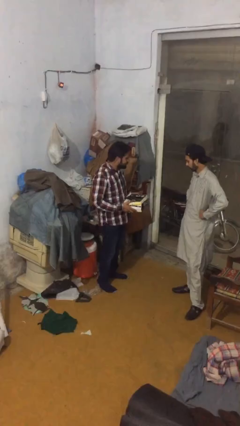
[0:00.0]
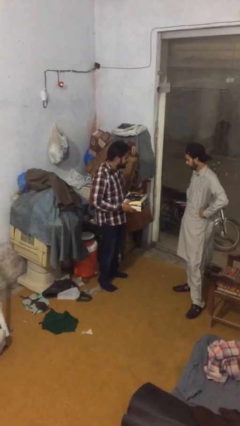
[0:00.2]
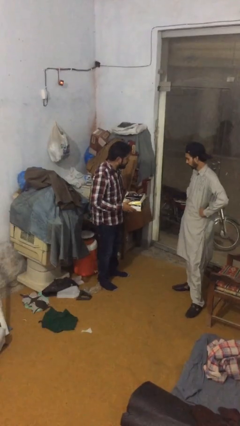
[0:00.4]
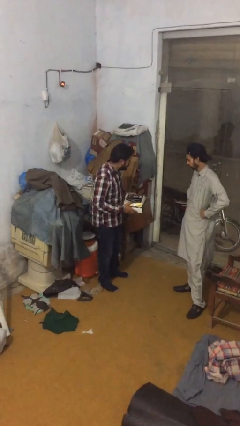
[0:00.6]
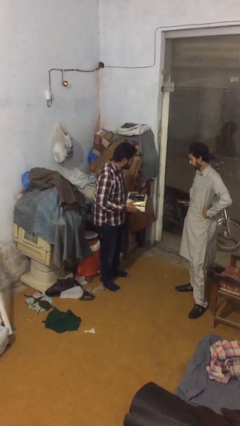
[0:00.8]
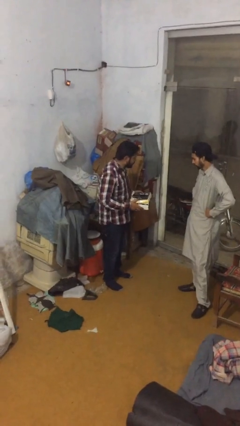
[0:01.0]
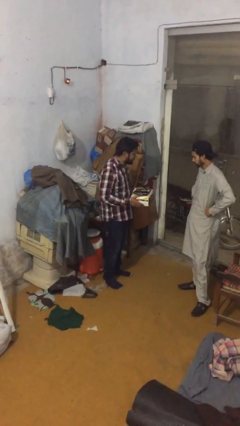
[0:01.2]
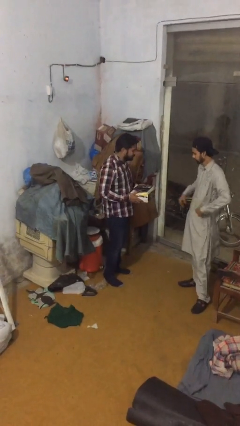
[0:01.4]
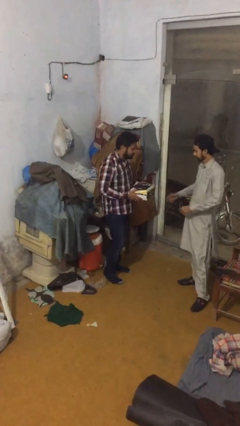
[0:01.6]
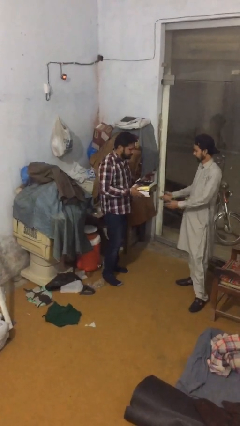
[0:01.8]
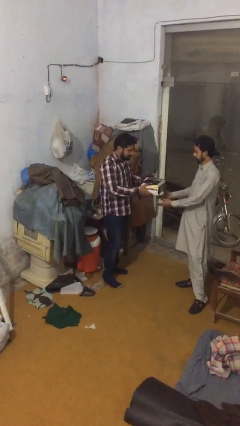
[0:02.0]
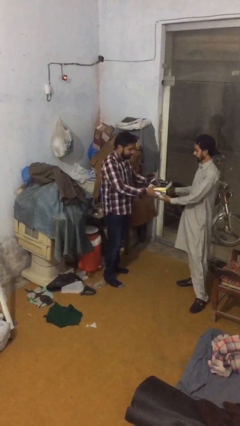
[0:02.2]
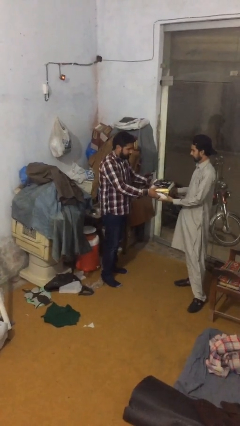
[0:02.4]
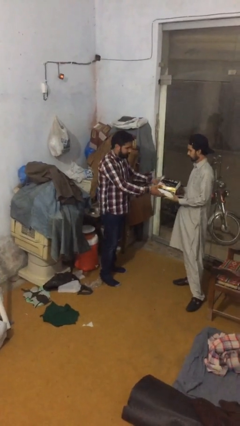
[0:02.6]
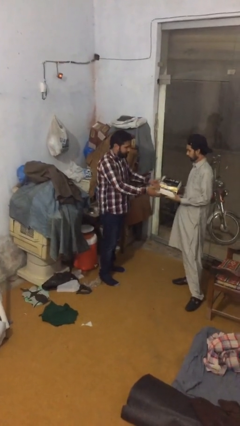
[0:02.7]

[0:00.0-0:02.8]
person transfers object to person

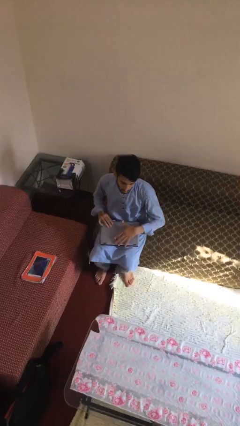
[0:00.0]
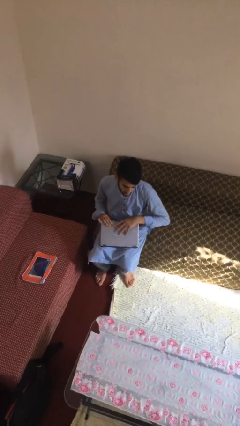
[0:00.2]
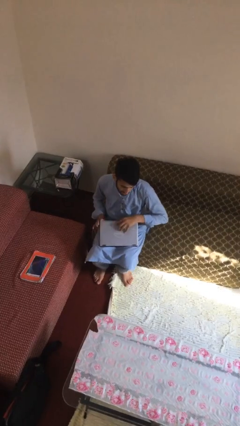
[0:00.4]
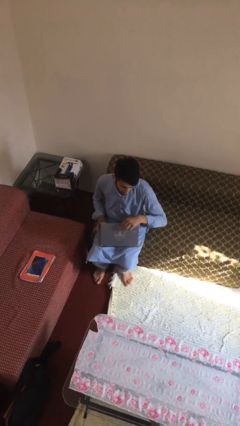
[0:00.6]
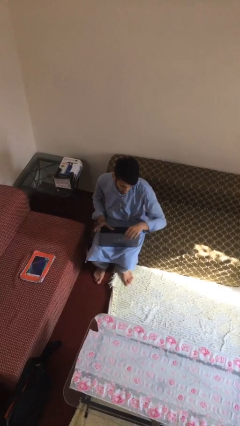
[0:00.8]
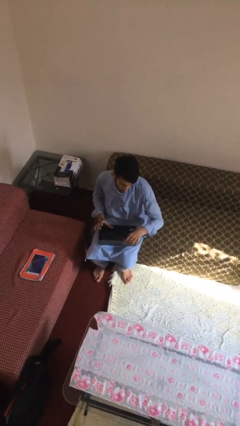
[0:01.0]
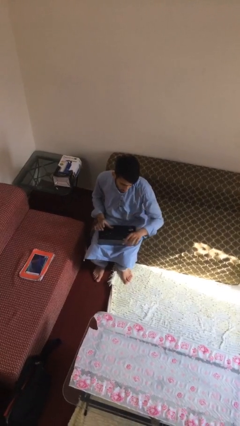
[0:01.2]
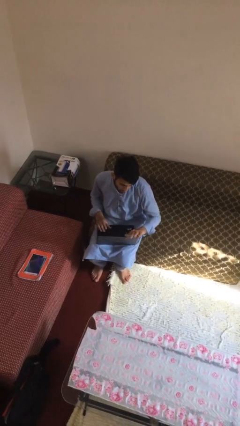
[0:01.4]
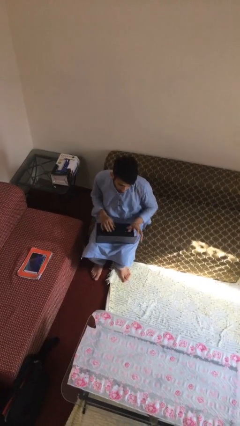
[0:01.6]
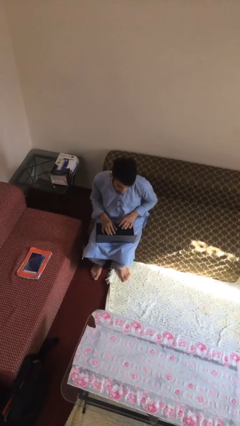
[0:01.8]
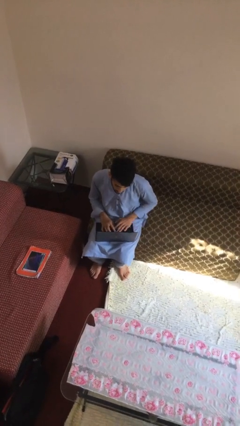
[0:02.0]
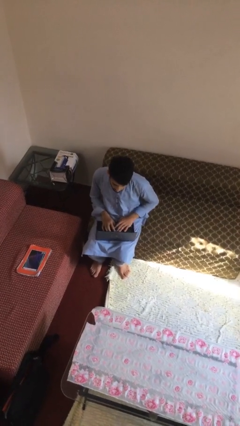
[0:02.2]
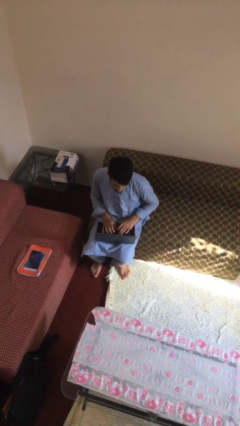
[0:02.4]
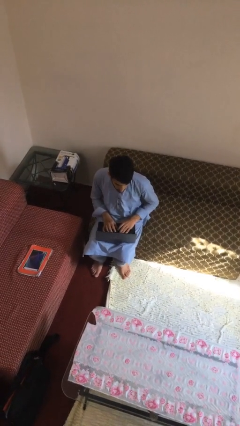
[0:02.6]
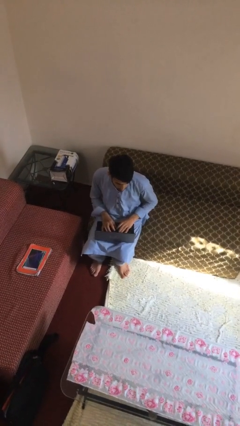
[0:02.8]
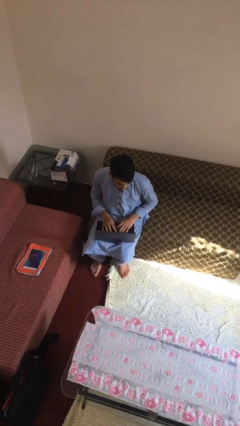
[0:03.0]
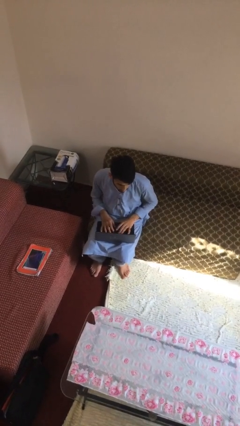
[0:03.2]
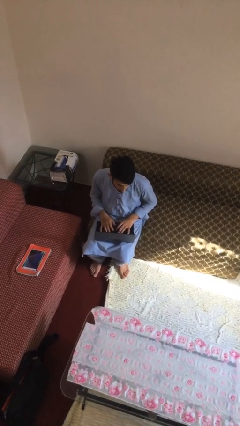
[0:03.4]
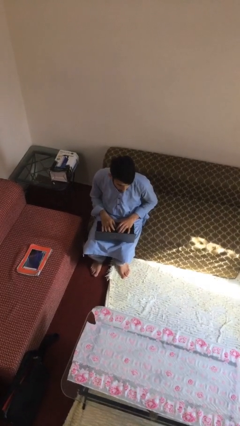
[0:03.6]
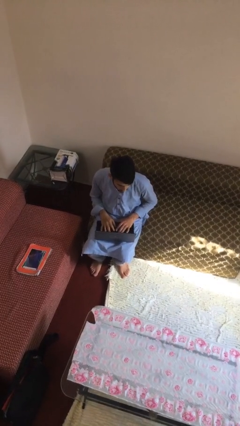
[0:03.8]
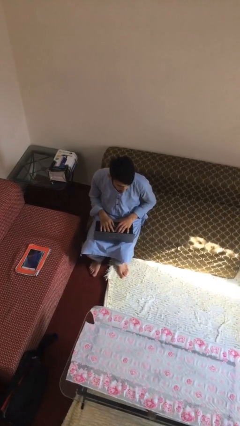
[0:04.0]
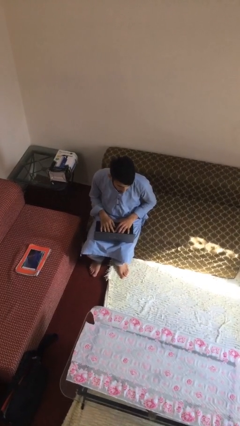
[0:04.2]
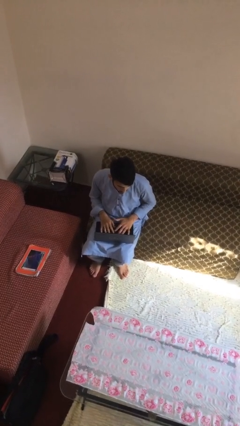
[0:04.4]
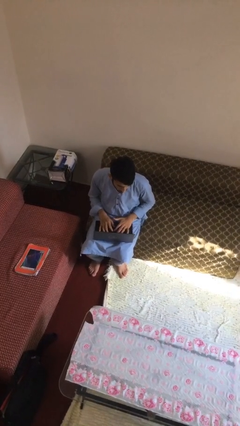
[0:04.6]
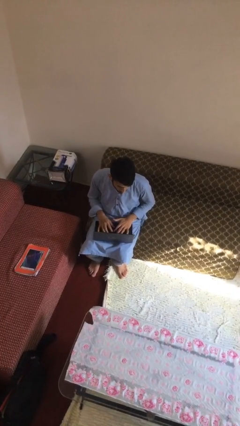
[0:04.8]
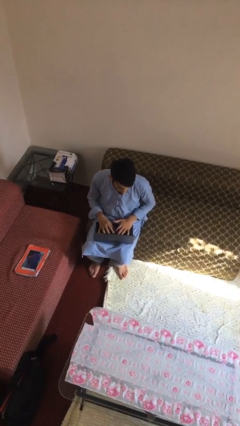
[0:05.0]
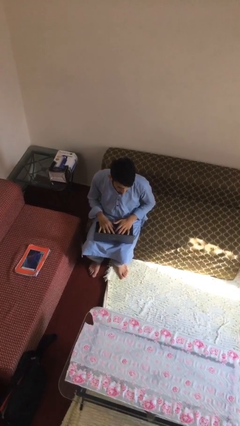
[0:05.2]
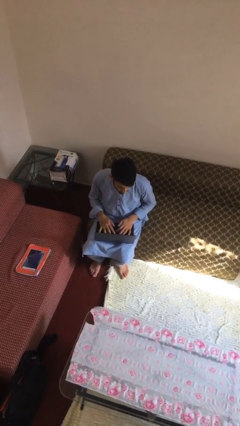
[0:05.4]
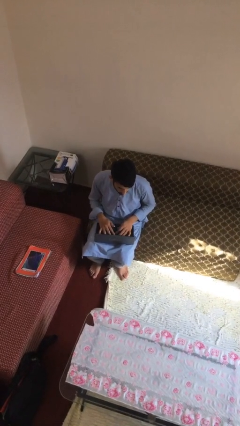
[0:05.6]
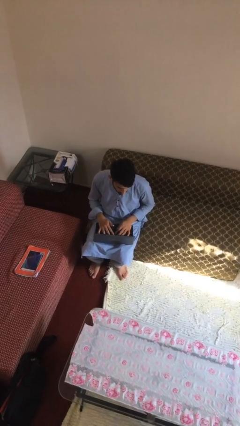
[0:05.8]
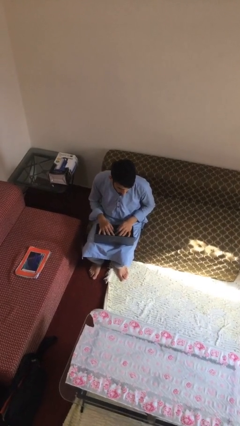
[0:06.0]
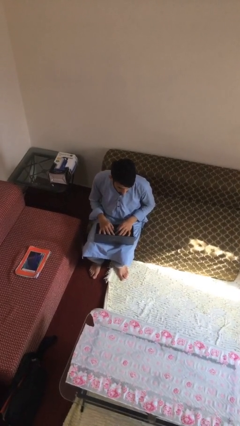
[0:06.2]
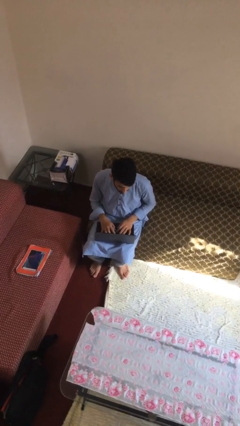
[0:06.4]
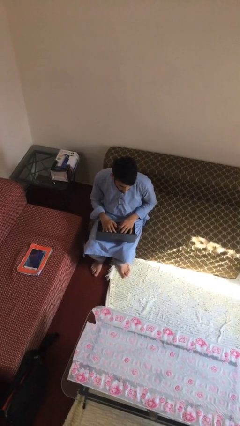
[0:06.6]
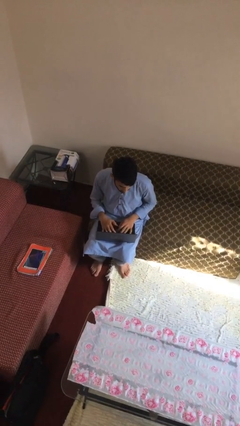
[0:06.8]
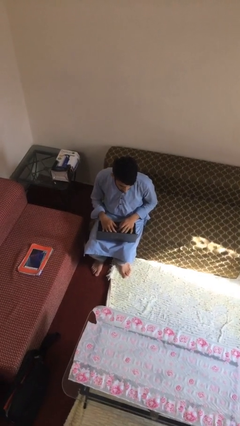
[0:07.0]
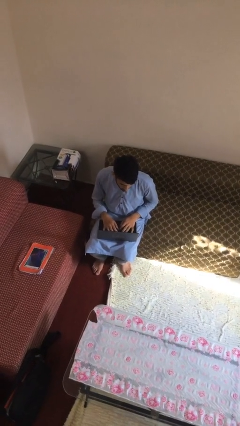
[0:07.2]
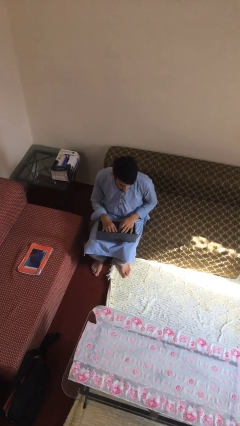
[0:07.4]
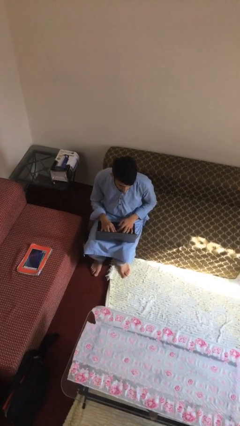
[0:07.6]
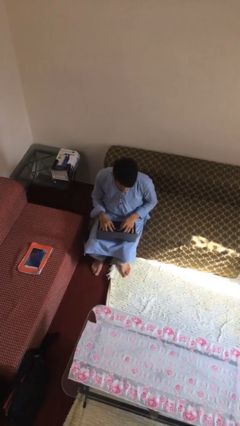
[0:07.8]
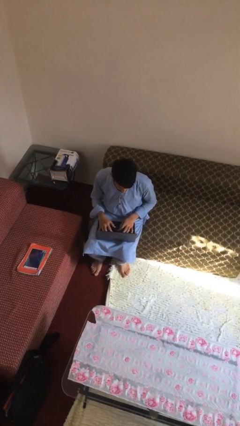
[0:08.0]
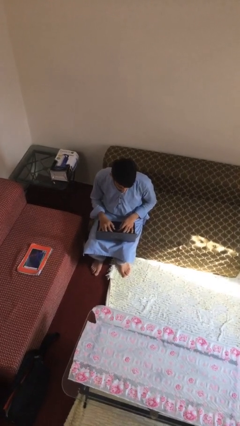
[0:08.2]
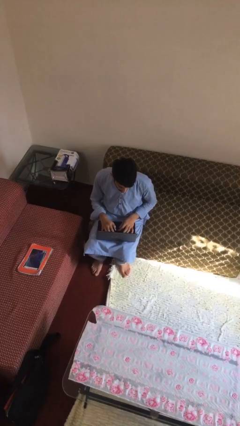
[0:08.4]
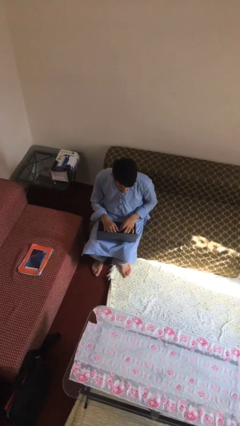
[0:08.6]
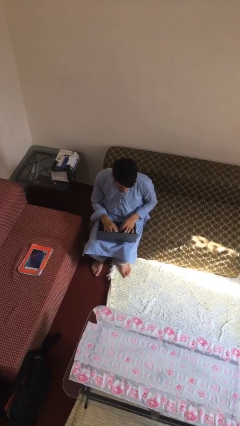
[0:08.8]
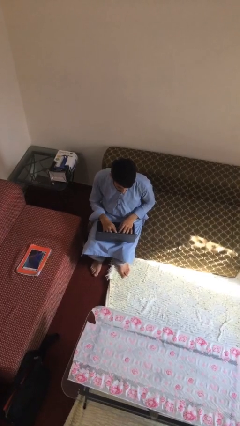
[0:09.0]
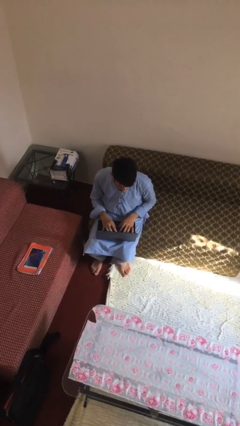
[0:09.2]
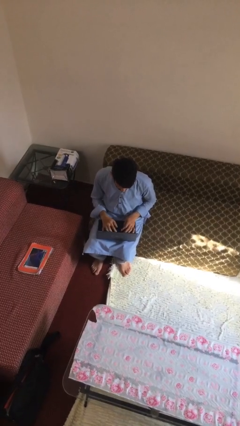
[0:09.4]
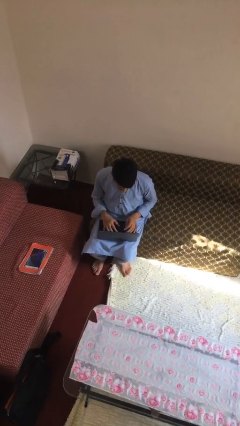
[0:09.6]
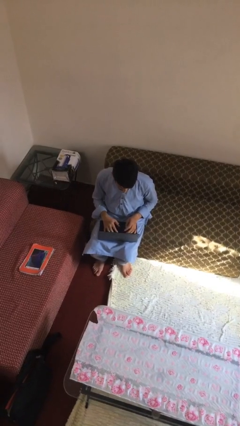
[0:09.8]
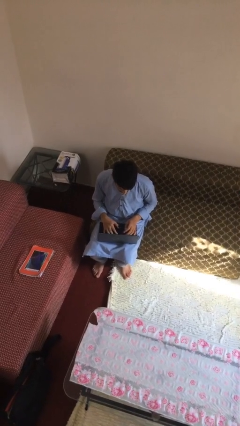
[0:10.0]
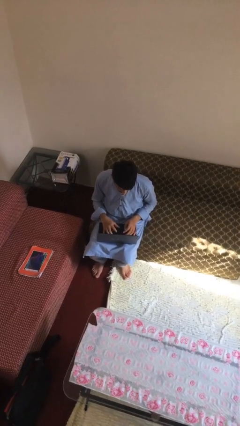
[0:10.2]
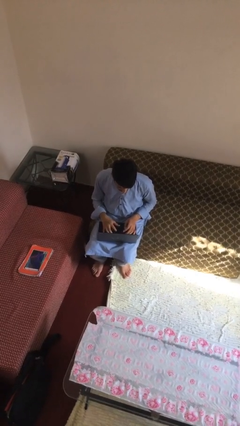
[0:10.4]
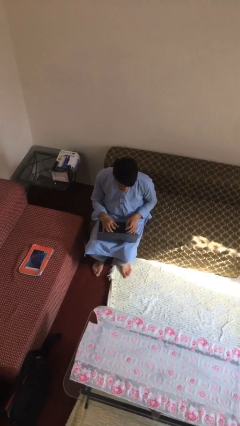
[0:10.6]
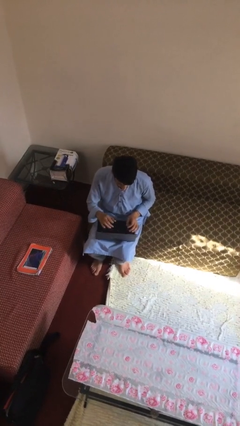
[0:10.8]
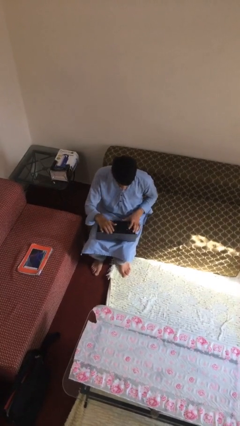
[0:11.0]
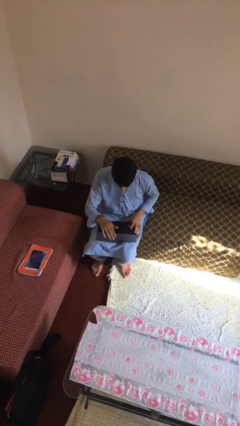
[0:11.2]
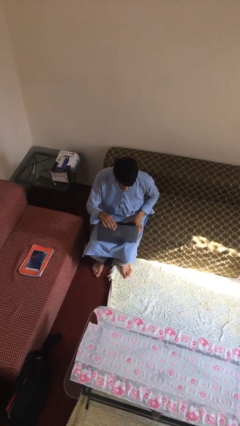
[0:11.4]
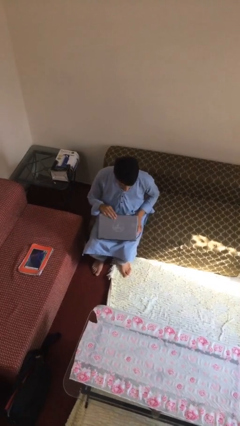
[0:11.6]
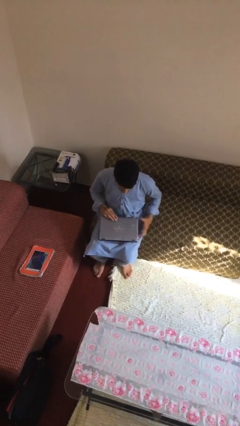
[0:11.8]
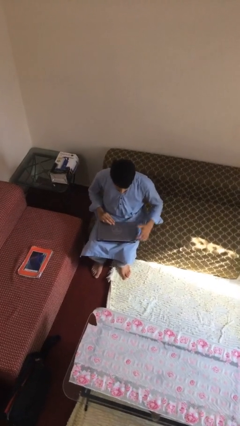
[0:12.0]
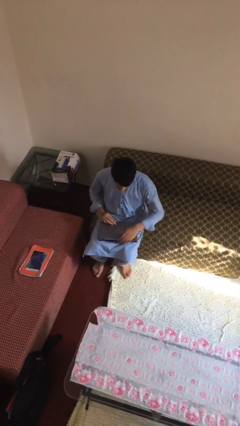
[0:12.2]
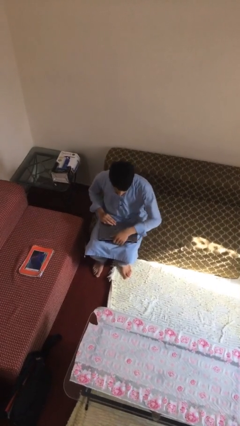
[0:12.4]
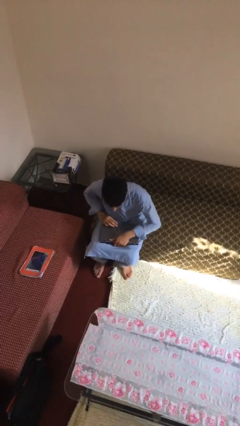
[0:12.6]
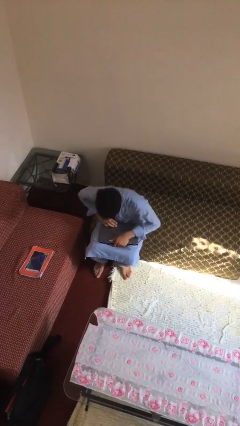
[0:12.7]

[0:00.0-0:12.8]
person interacts with laptop

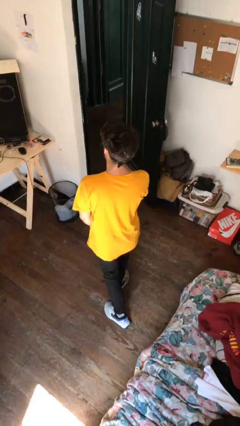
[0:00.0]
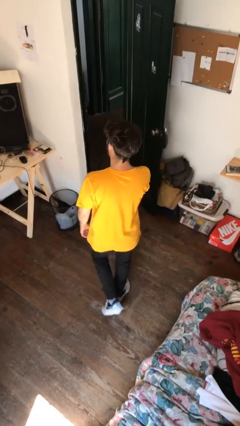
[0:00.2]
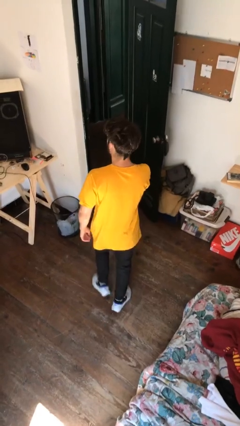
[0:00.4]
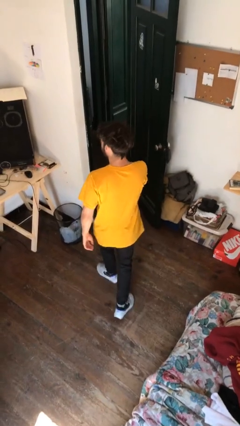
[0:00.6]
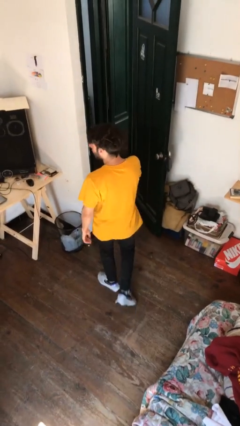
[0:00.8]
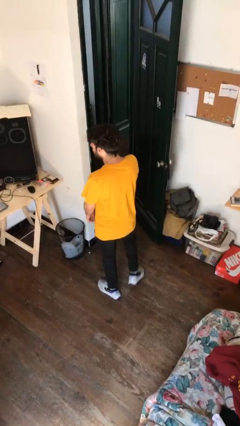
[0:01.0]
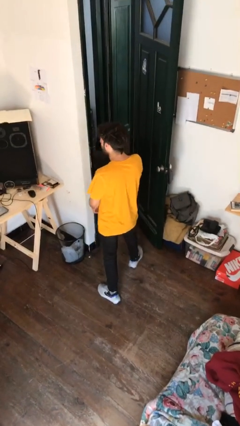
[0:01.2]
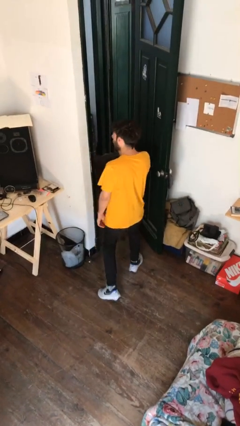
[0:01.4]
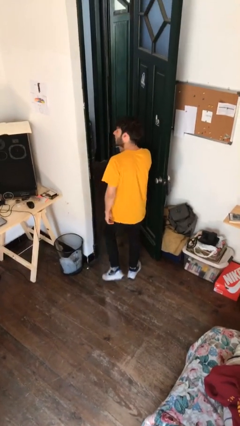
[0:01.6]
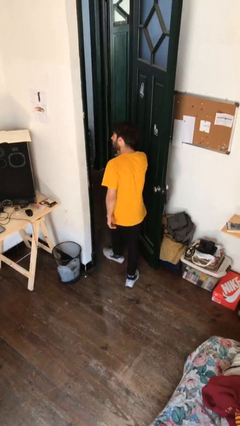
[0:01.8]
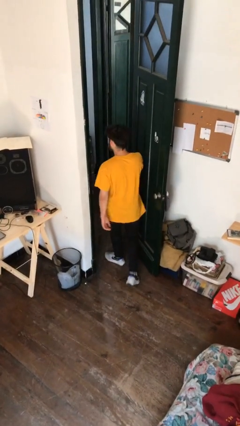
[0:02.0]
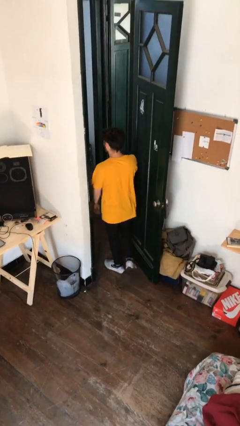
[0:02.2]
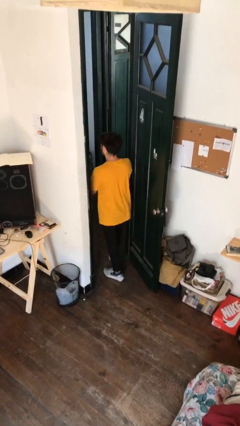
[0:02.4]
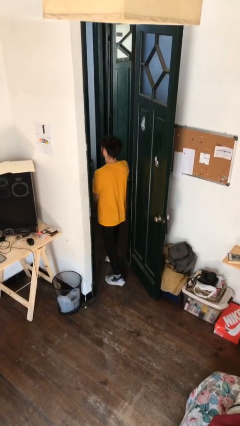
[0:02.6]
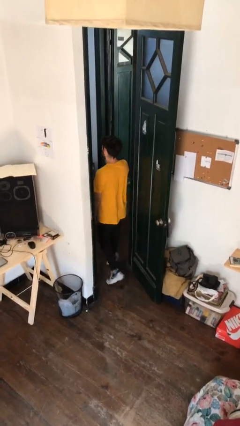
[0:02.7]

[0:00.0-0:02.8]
person exits scene through structure
